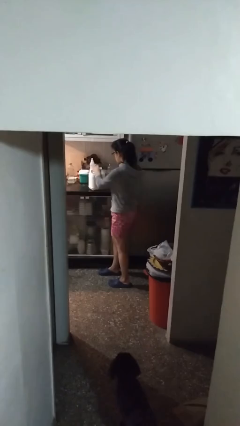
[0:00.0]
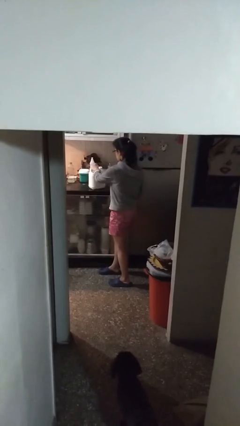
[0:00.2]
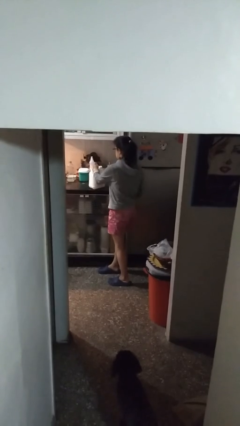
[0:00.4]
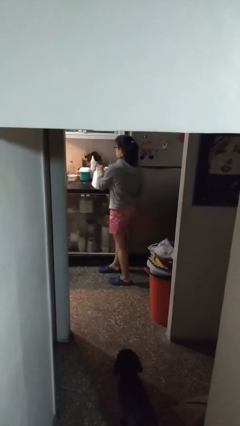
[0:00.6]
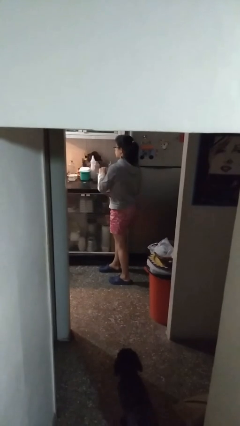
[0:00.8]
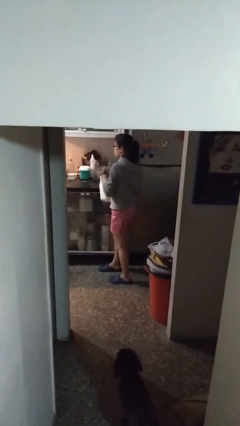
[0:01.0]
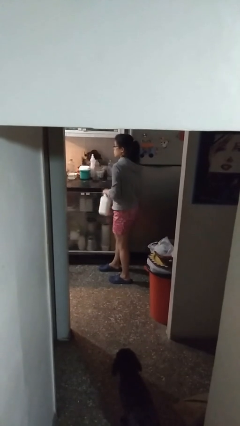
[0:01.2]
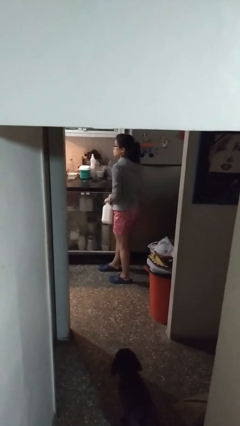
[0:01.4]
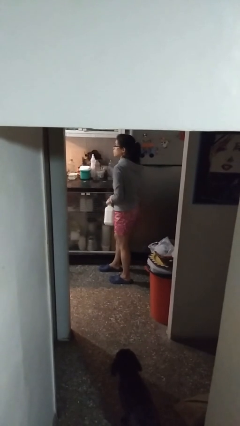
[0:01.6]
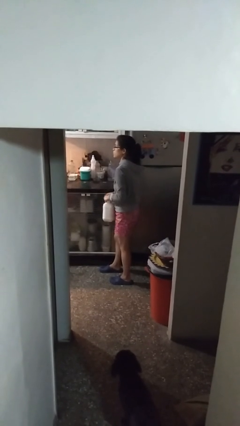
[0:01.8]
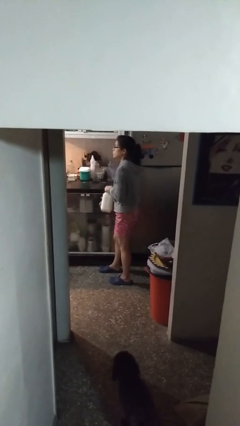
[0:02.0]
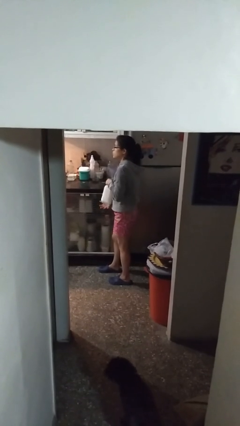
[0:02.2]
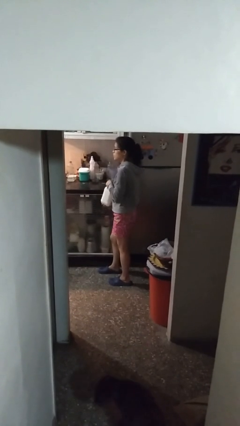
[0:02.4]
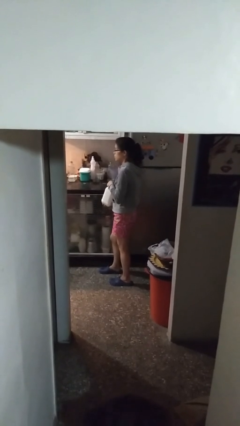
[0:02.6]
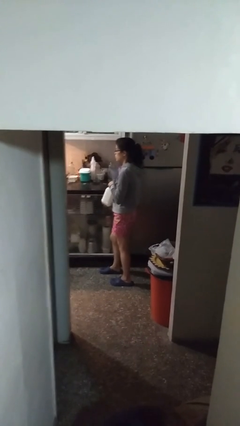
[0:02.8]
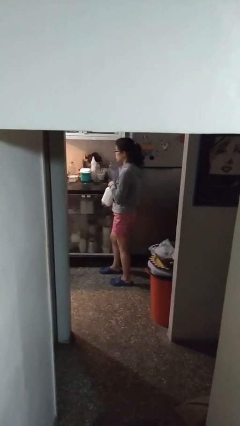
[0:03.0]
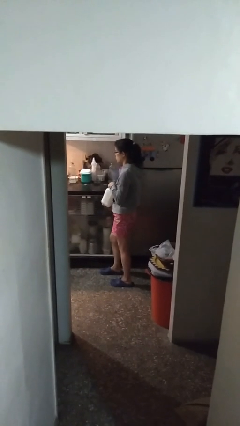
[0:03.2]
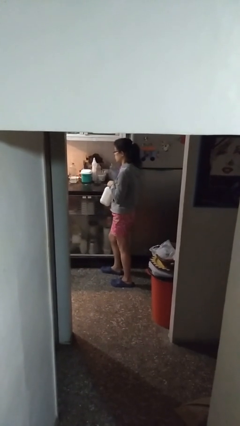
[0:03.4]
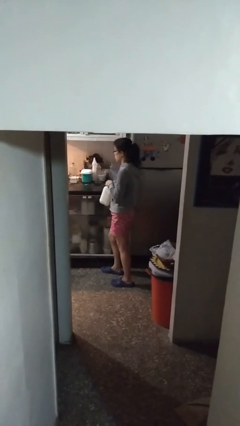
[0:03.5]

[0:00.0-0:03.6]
person picks up object from countertop

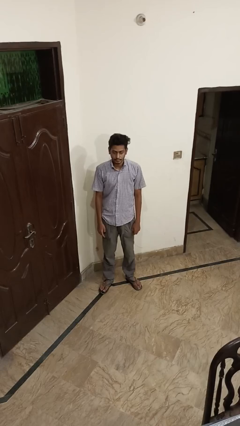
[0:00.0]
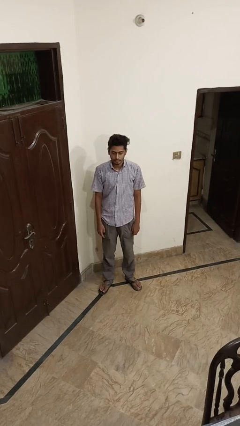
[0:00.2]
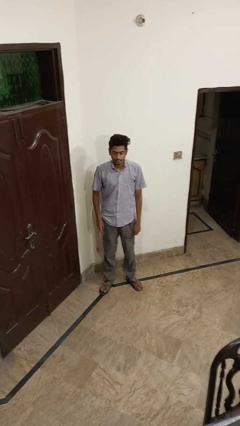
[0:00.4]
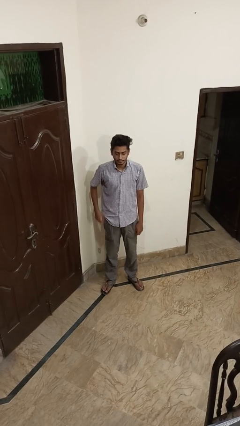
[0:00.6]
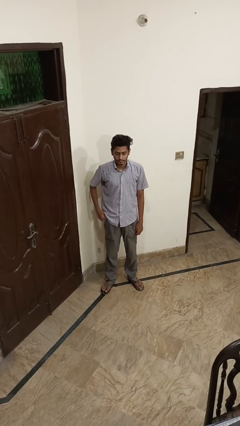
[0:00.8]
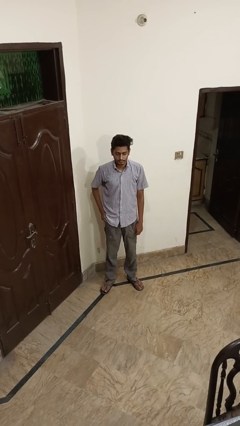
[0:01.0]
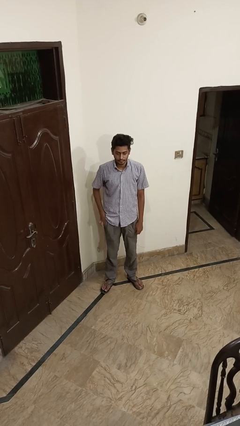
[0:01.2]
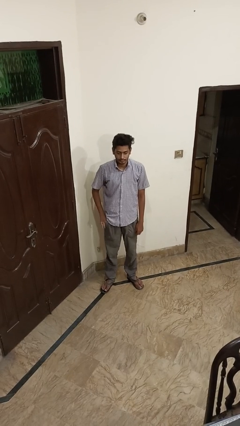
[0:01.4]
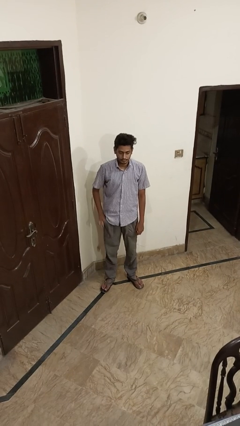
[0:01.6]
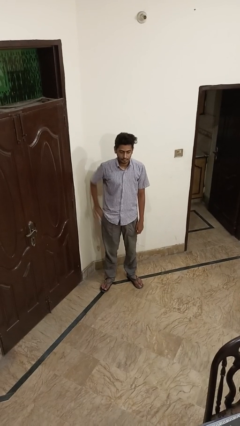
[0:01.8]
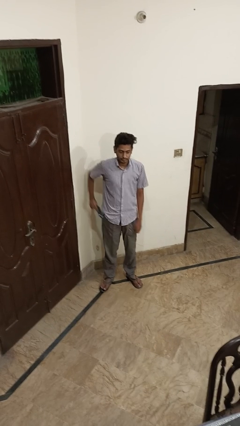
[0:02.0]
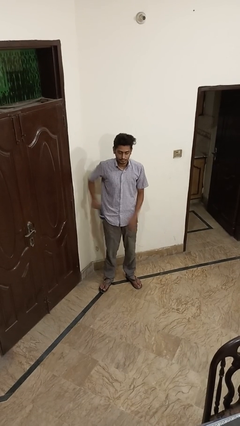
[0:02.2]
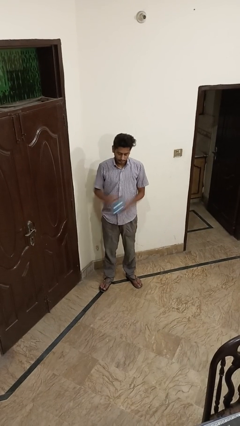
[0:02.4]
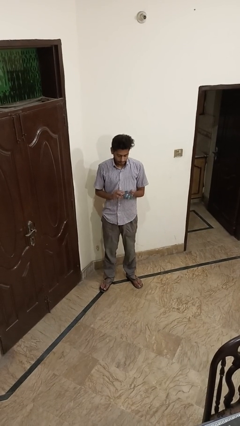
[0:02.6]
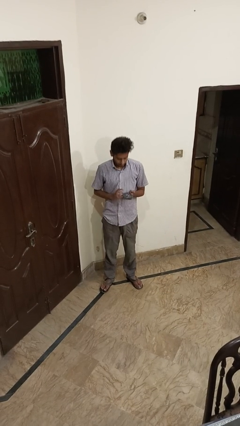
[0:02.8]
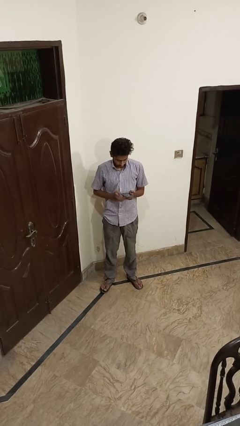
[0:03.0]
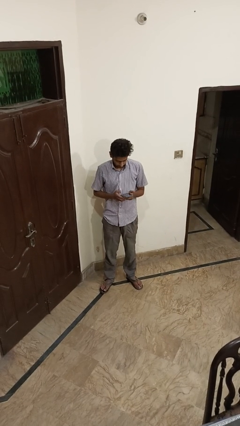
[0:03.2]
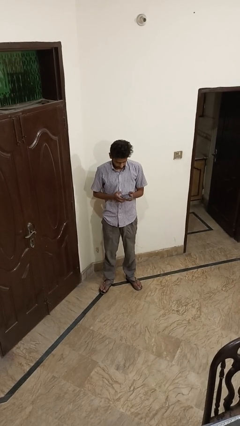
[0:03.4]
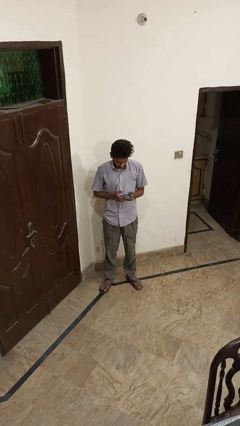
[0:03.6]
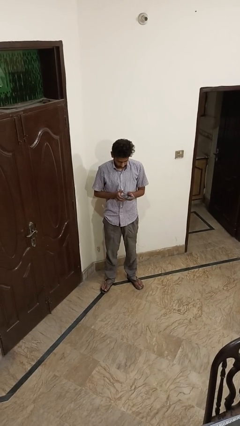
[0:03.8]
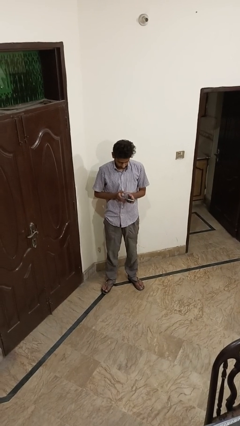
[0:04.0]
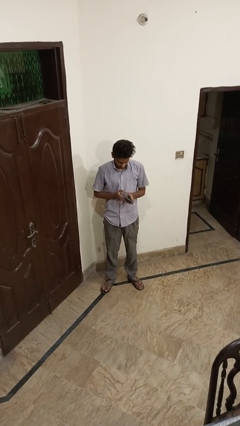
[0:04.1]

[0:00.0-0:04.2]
person takes phone from pocket

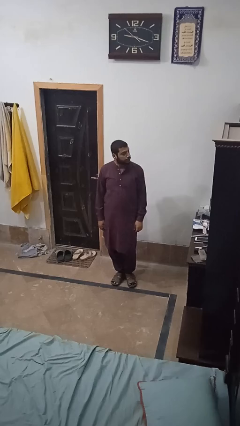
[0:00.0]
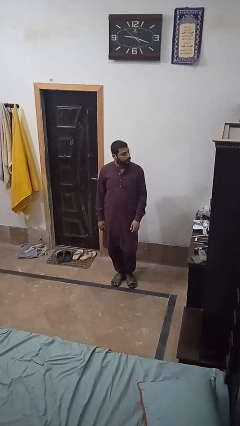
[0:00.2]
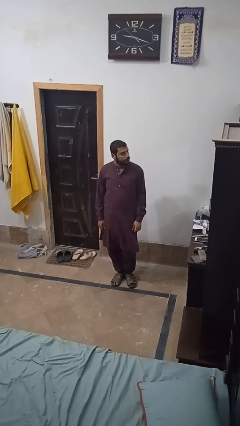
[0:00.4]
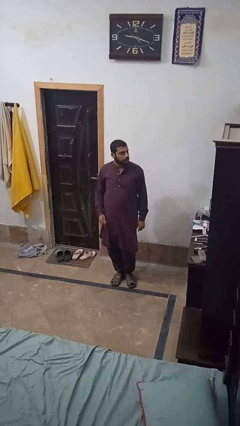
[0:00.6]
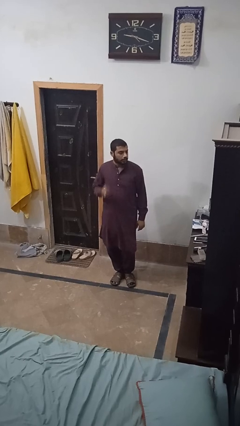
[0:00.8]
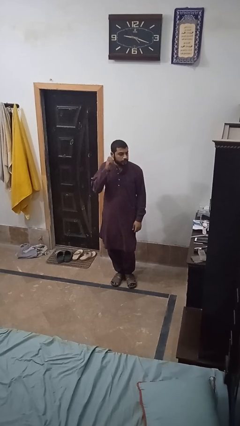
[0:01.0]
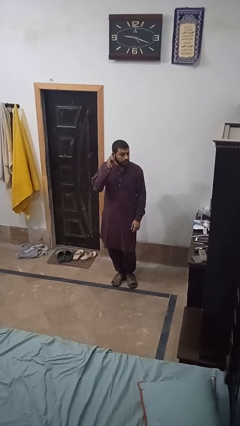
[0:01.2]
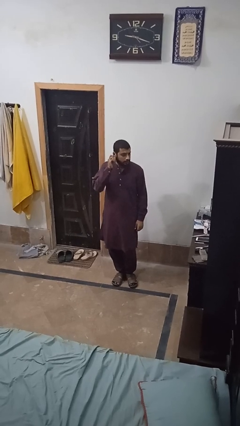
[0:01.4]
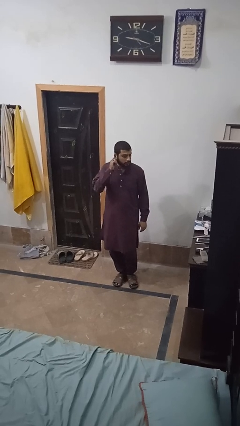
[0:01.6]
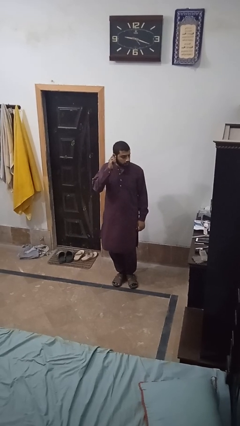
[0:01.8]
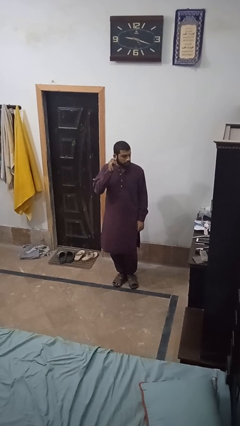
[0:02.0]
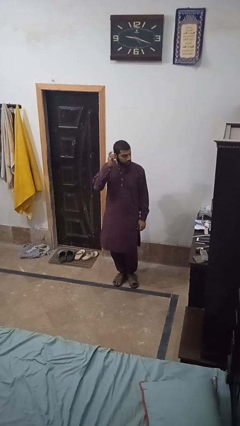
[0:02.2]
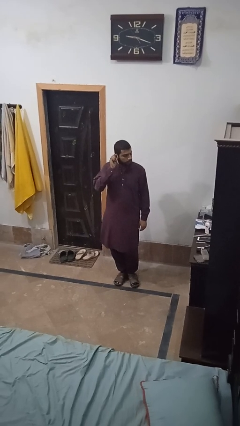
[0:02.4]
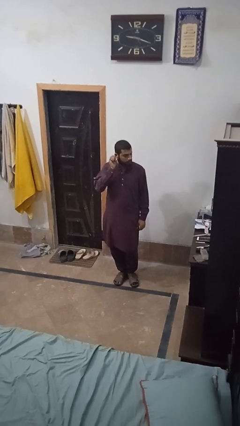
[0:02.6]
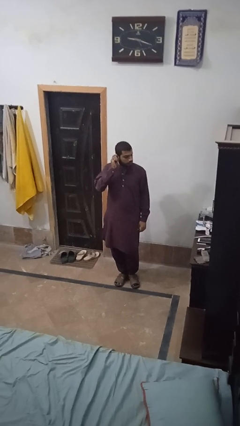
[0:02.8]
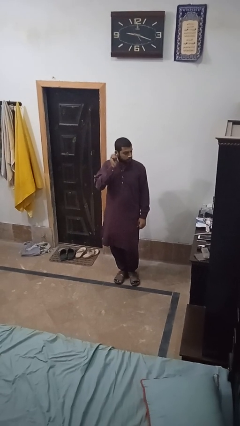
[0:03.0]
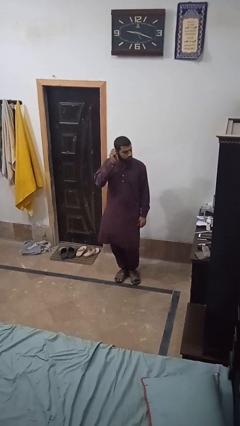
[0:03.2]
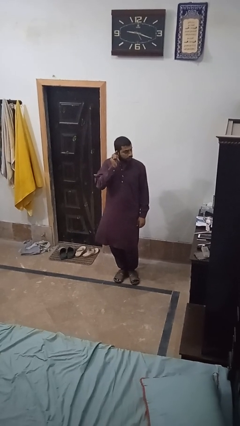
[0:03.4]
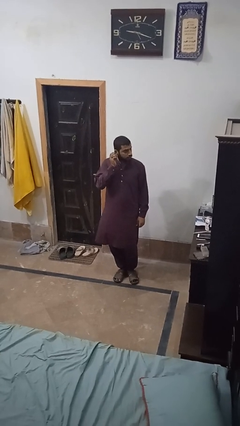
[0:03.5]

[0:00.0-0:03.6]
person touches earlobe

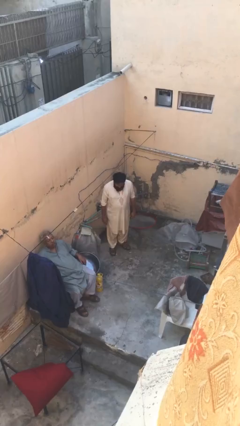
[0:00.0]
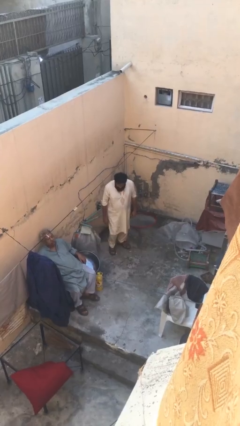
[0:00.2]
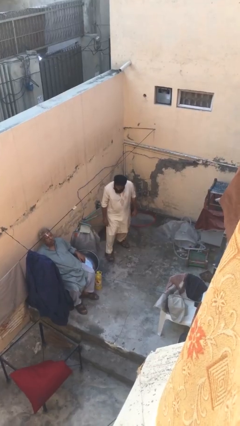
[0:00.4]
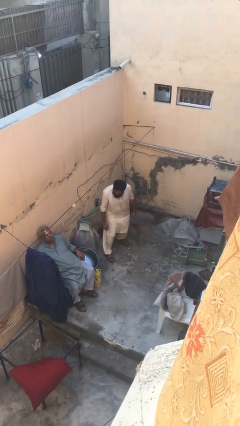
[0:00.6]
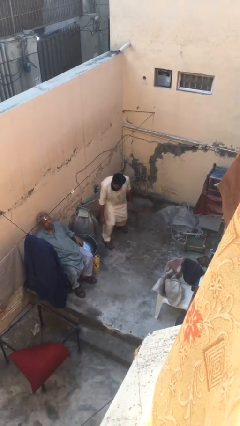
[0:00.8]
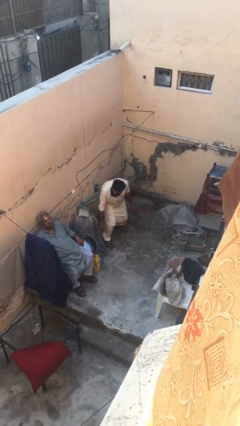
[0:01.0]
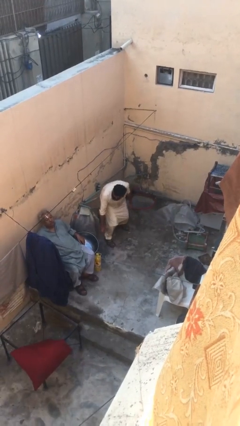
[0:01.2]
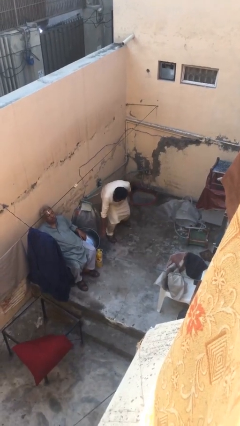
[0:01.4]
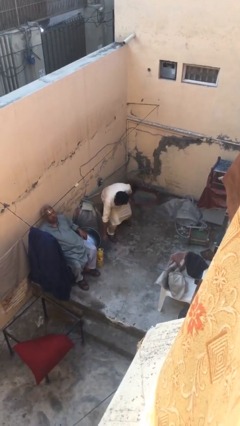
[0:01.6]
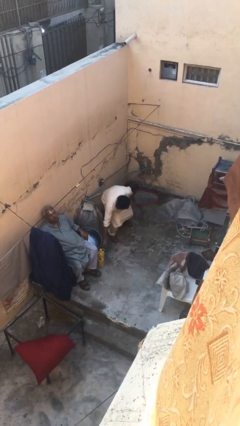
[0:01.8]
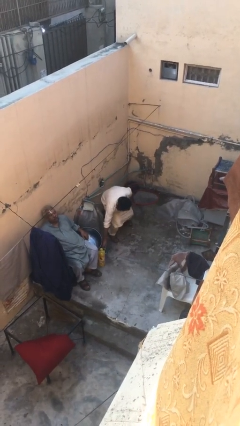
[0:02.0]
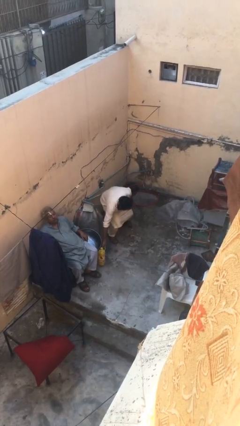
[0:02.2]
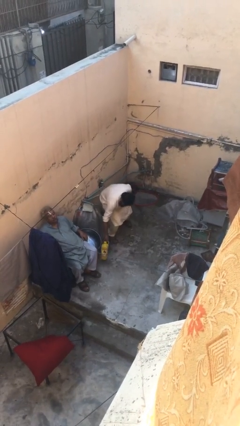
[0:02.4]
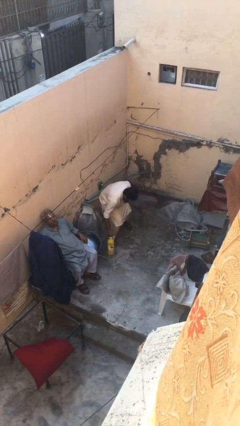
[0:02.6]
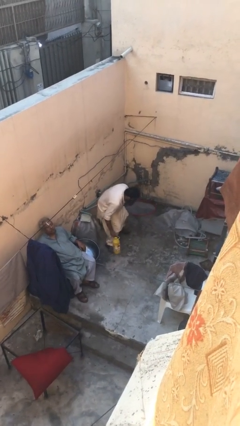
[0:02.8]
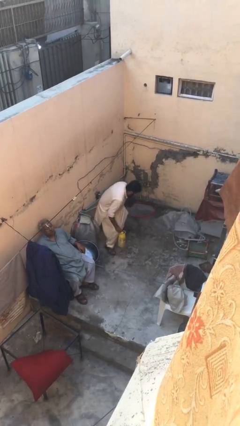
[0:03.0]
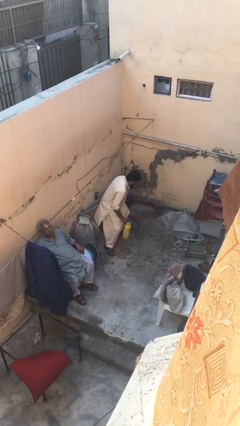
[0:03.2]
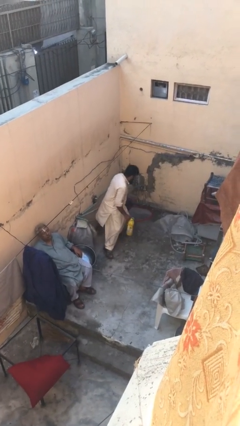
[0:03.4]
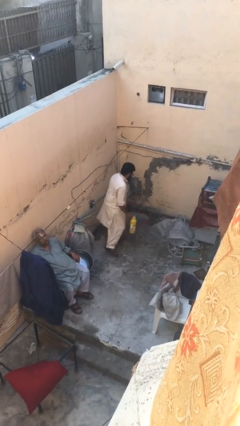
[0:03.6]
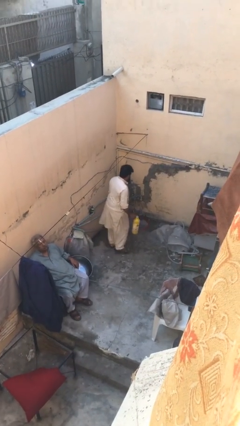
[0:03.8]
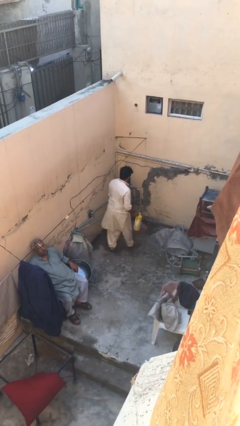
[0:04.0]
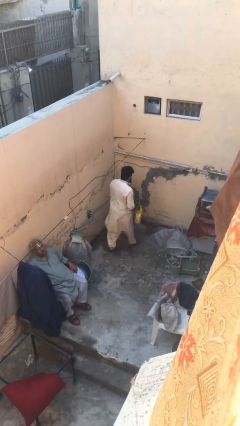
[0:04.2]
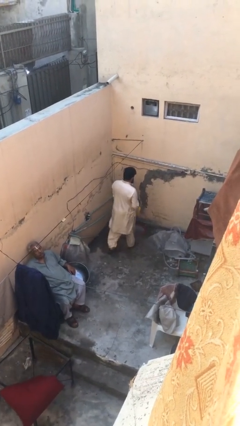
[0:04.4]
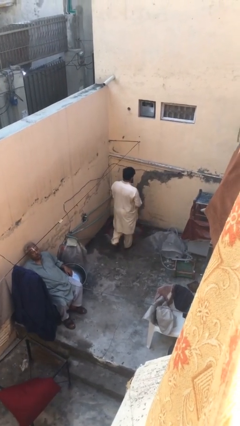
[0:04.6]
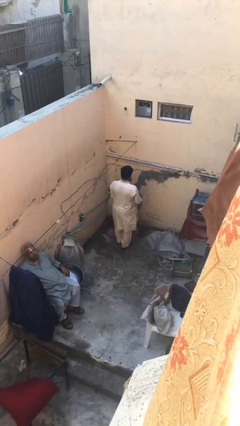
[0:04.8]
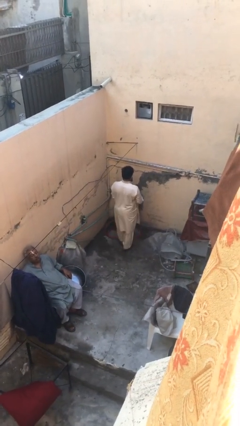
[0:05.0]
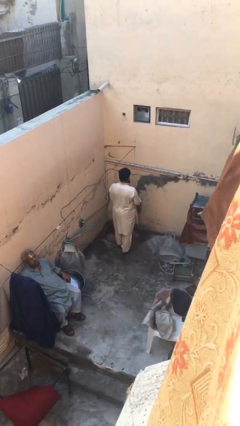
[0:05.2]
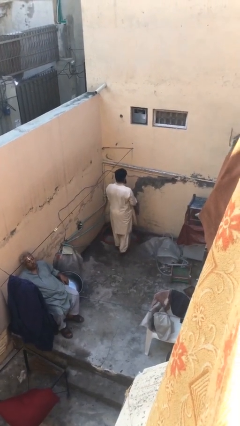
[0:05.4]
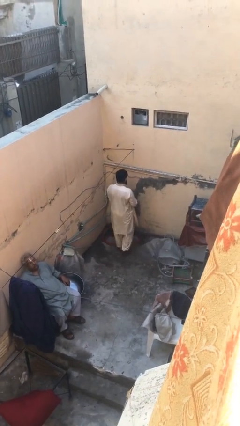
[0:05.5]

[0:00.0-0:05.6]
person steals object from person

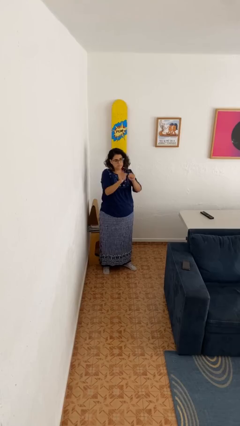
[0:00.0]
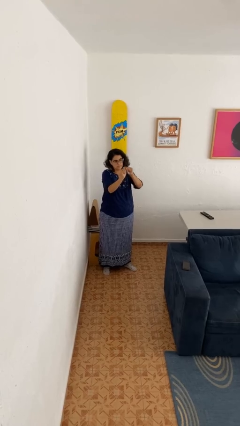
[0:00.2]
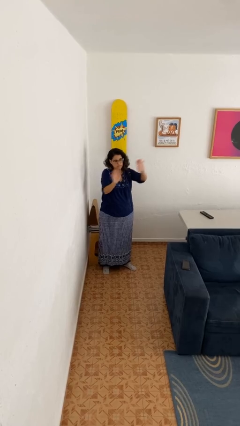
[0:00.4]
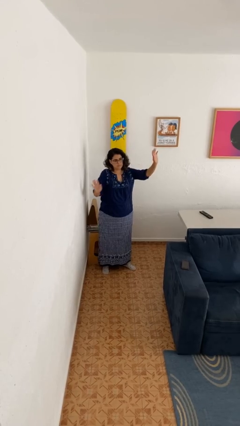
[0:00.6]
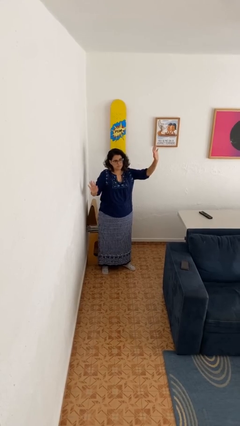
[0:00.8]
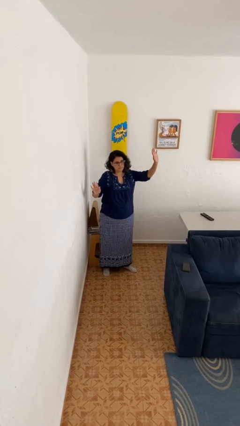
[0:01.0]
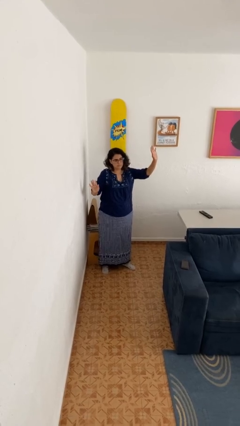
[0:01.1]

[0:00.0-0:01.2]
person gestures zoom in
